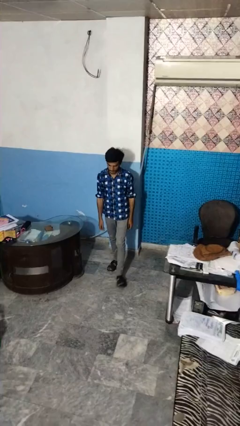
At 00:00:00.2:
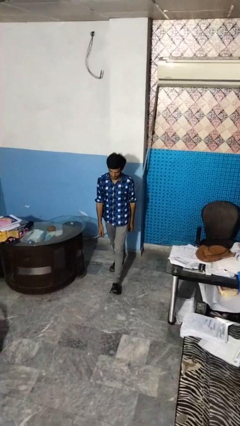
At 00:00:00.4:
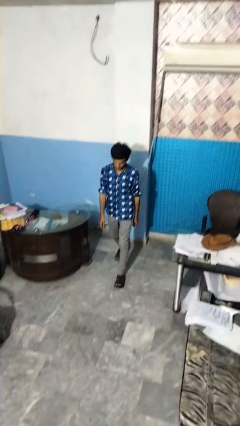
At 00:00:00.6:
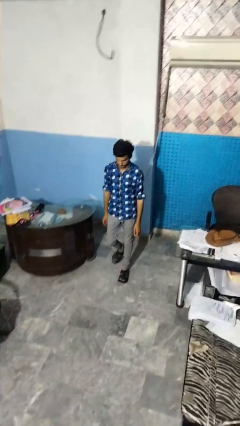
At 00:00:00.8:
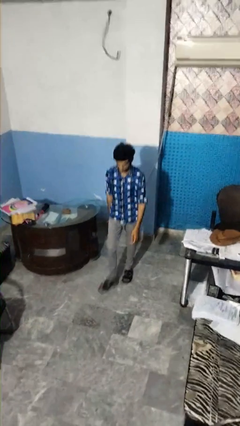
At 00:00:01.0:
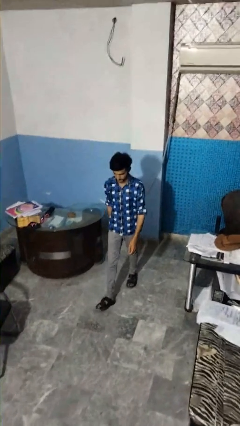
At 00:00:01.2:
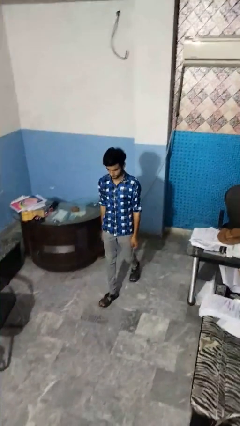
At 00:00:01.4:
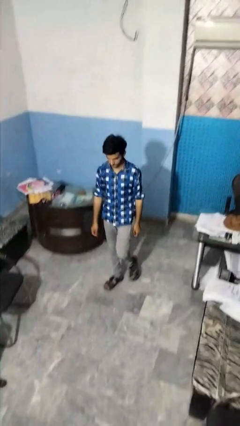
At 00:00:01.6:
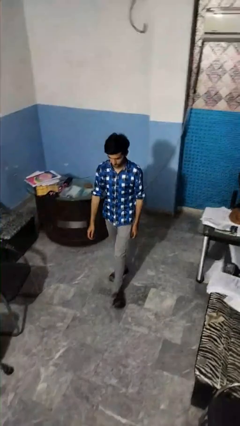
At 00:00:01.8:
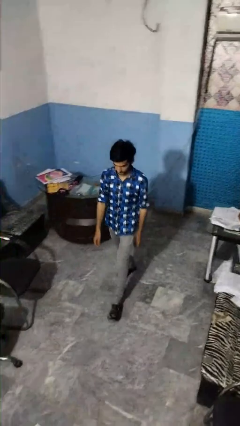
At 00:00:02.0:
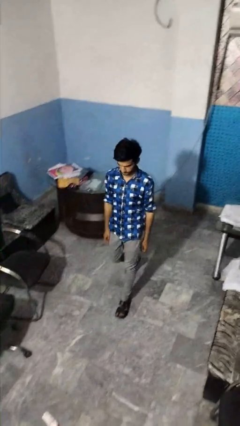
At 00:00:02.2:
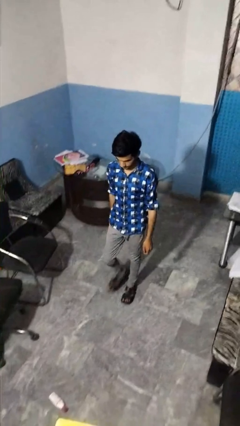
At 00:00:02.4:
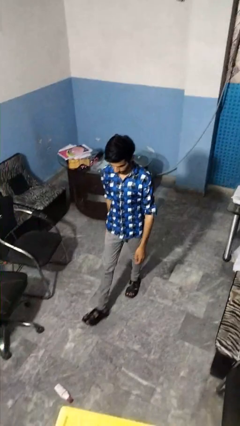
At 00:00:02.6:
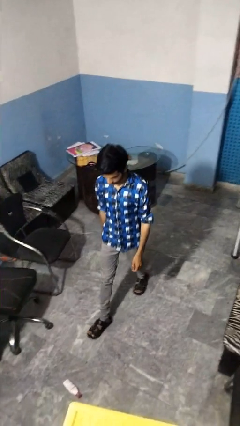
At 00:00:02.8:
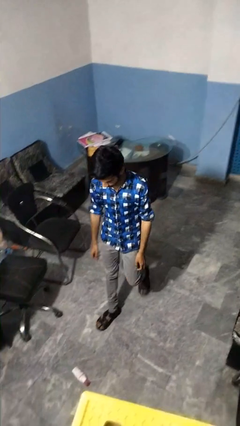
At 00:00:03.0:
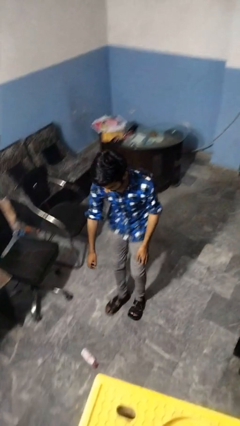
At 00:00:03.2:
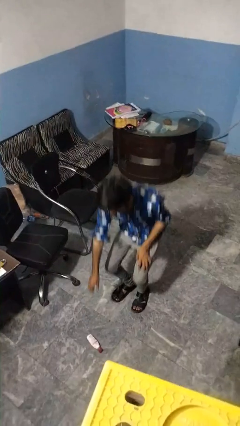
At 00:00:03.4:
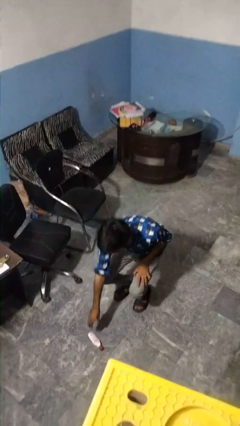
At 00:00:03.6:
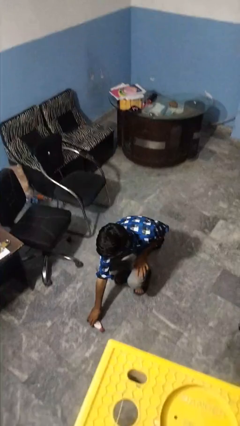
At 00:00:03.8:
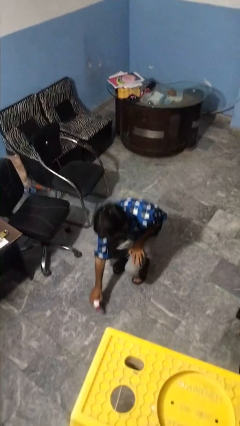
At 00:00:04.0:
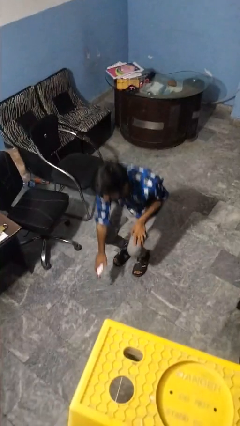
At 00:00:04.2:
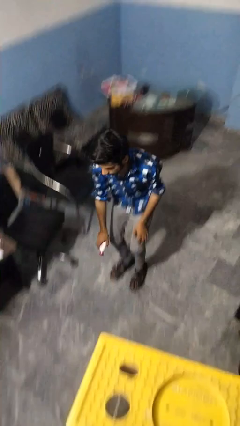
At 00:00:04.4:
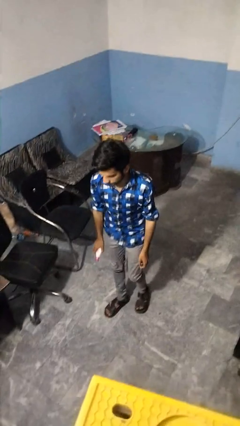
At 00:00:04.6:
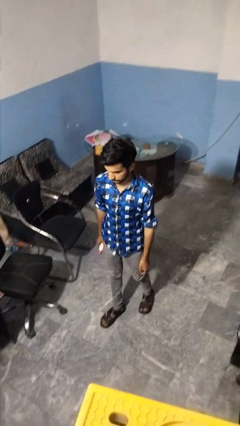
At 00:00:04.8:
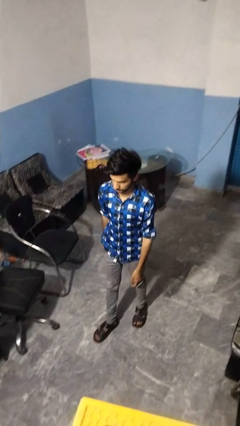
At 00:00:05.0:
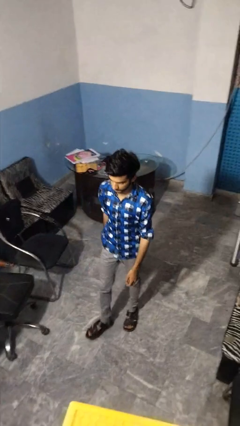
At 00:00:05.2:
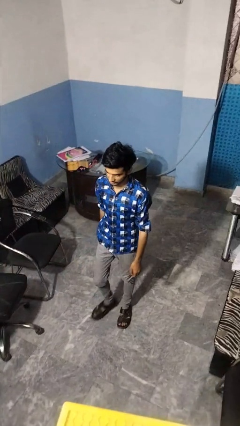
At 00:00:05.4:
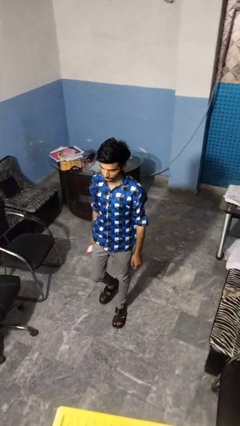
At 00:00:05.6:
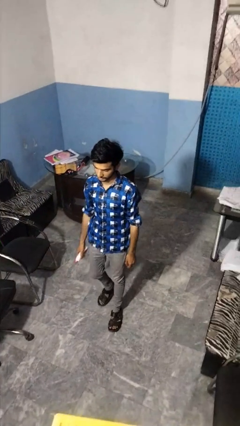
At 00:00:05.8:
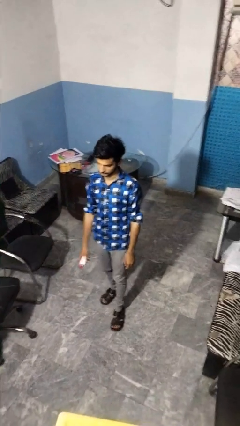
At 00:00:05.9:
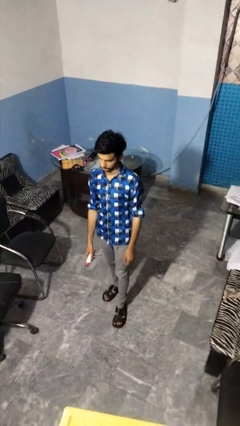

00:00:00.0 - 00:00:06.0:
person picks up object from floor

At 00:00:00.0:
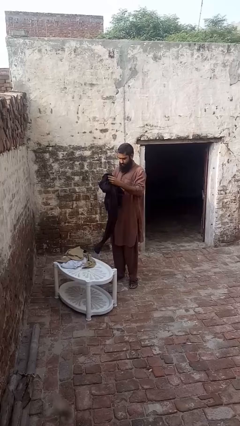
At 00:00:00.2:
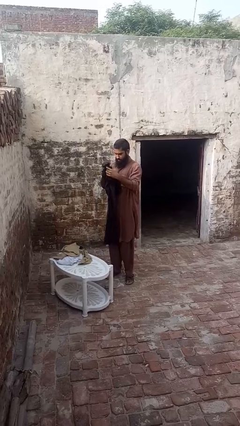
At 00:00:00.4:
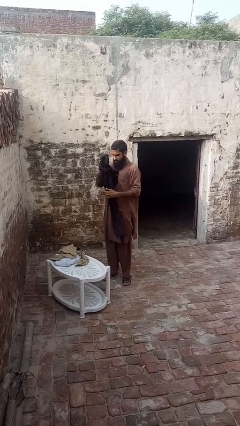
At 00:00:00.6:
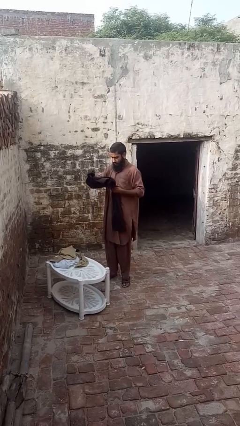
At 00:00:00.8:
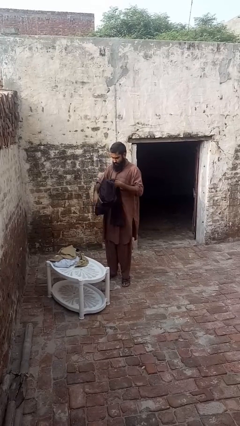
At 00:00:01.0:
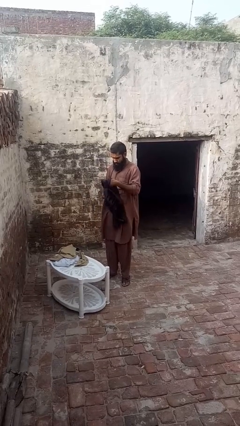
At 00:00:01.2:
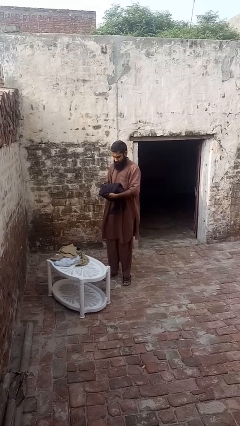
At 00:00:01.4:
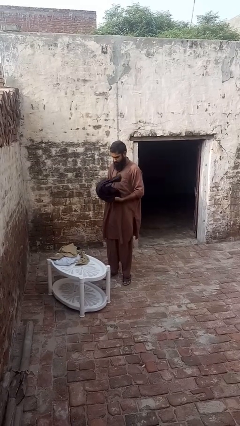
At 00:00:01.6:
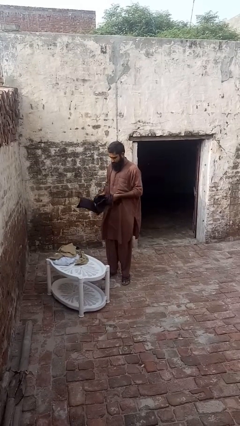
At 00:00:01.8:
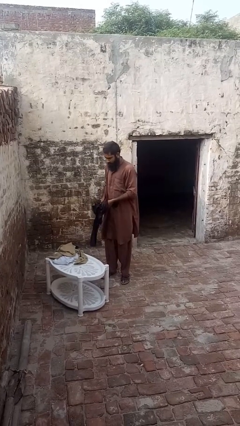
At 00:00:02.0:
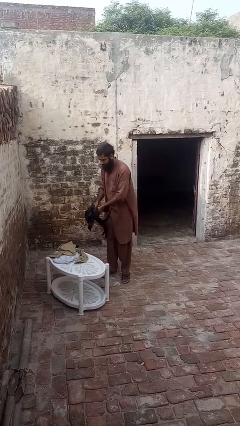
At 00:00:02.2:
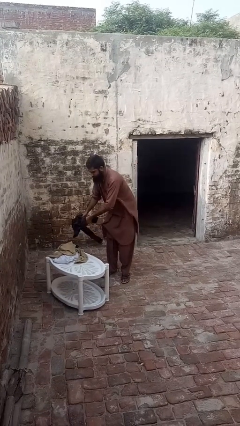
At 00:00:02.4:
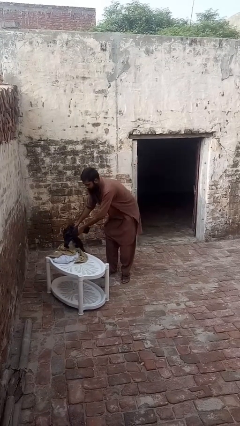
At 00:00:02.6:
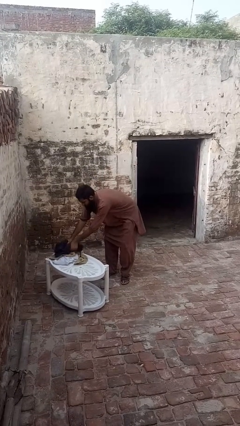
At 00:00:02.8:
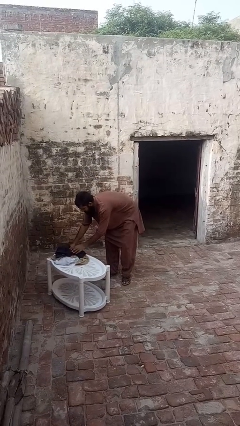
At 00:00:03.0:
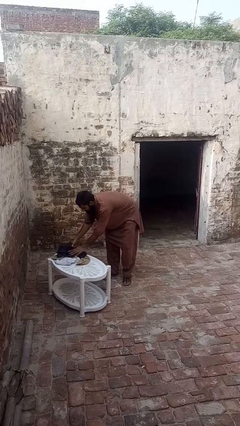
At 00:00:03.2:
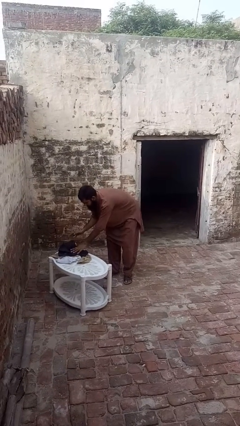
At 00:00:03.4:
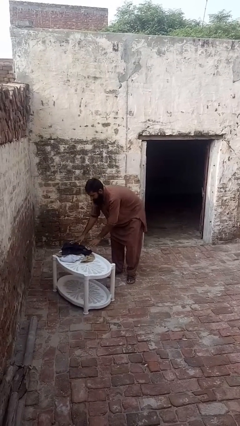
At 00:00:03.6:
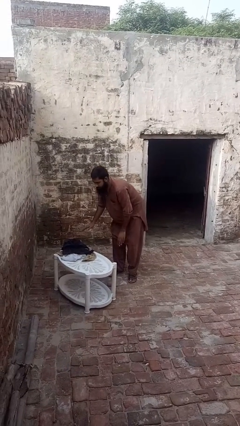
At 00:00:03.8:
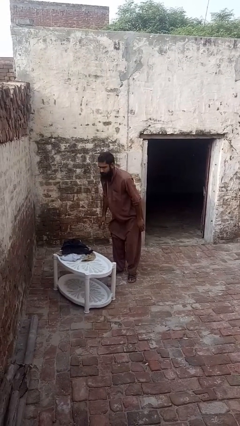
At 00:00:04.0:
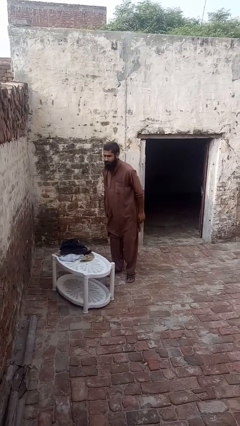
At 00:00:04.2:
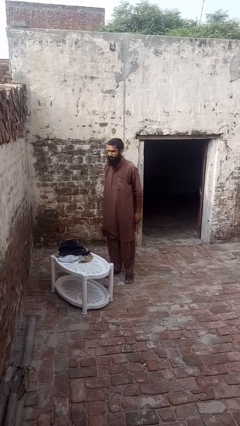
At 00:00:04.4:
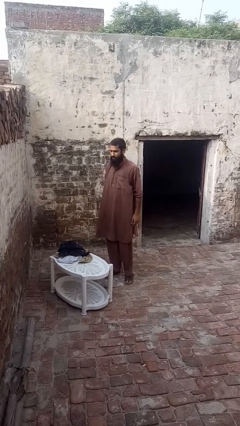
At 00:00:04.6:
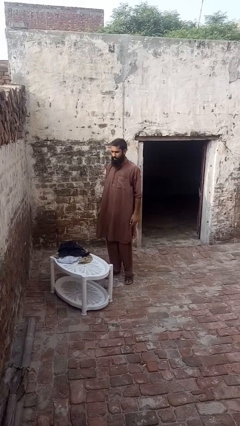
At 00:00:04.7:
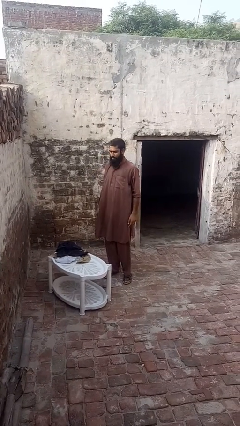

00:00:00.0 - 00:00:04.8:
person folds pants

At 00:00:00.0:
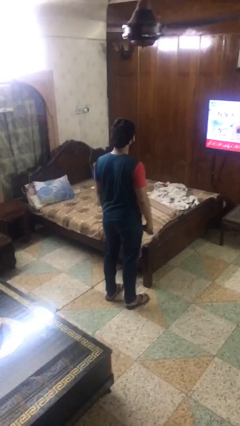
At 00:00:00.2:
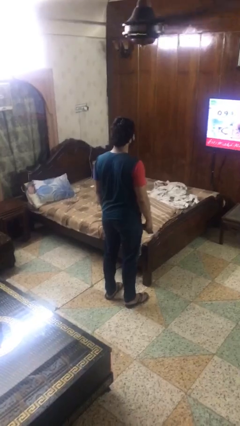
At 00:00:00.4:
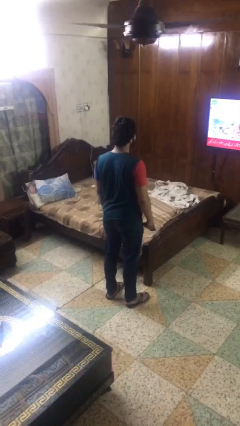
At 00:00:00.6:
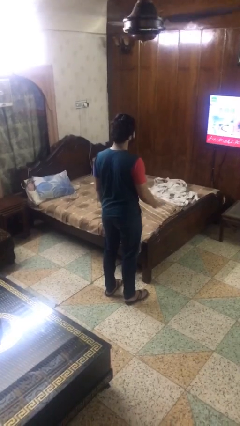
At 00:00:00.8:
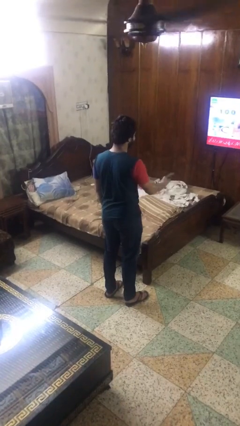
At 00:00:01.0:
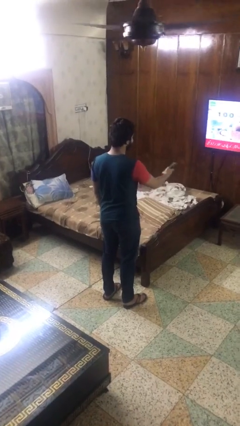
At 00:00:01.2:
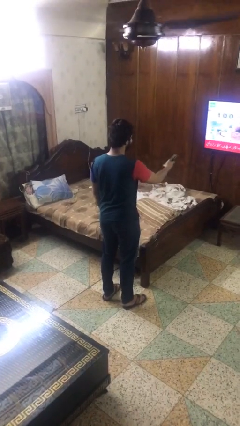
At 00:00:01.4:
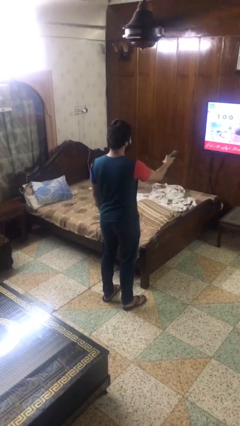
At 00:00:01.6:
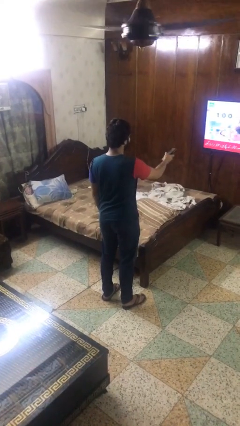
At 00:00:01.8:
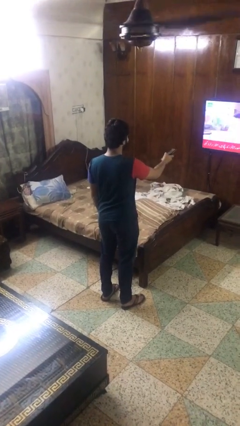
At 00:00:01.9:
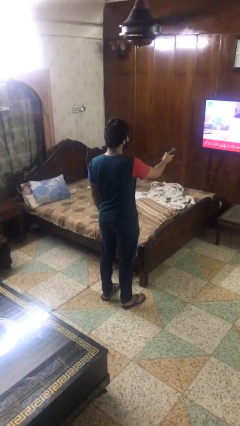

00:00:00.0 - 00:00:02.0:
person uses television remote

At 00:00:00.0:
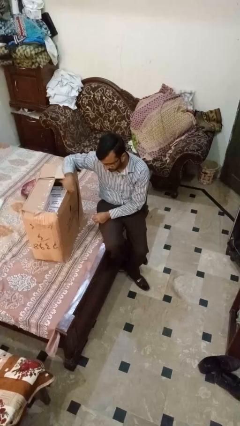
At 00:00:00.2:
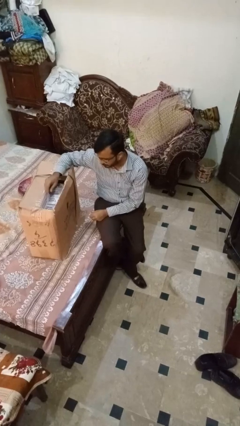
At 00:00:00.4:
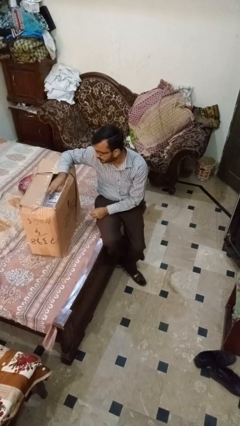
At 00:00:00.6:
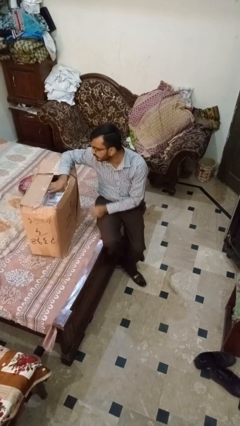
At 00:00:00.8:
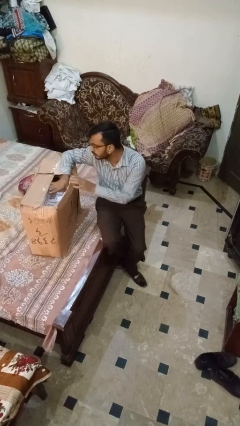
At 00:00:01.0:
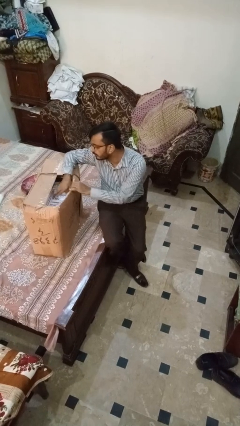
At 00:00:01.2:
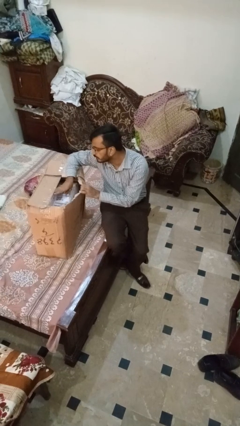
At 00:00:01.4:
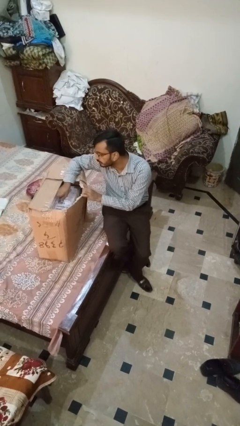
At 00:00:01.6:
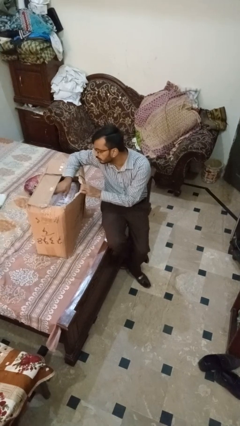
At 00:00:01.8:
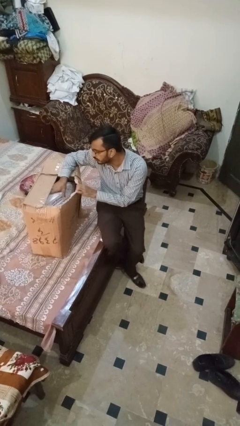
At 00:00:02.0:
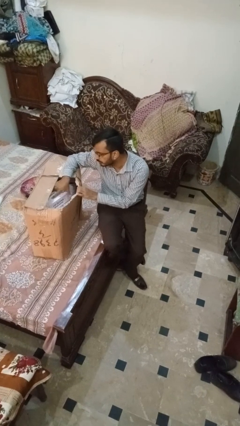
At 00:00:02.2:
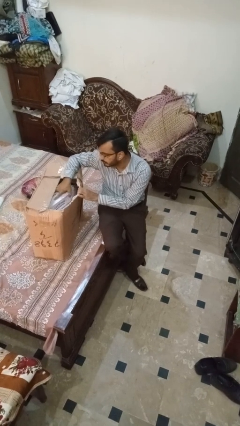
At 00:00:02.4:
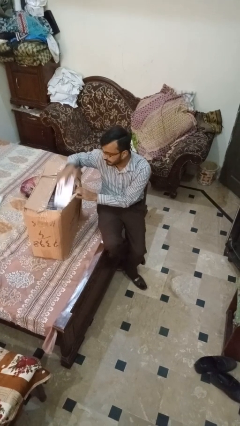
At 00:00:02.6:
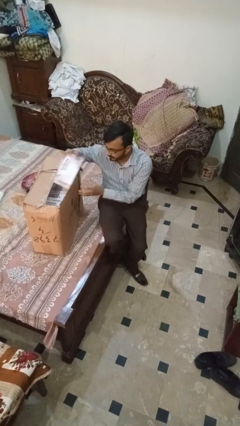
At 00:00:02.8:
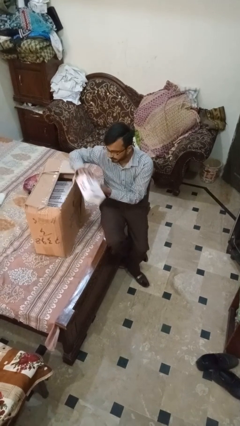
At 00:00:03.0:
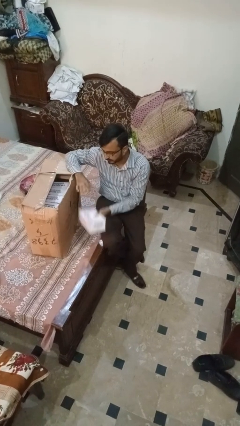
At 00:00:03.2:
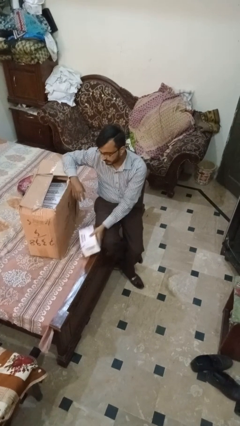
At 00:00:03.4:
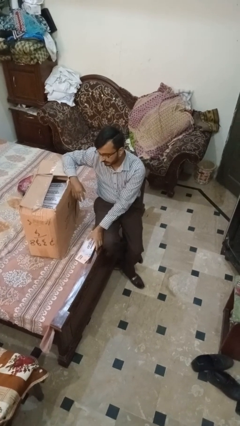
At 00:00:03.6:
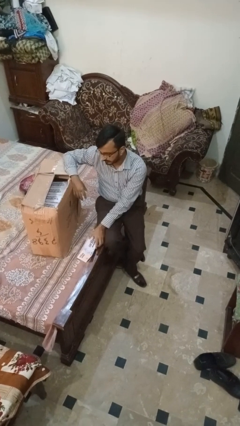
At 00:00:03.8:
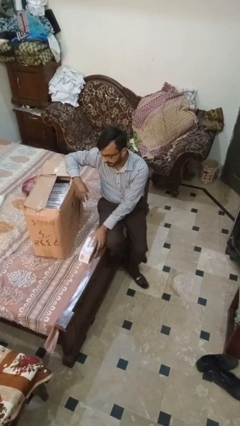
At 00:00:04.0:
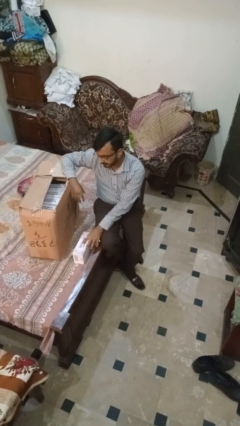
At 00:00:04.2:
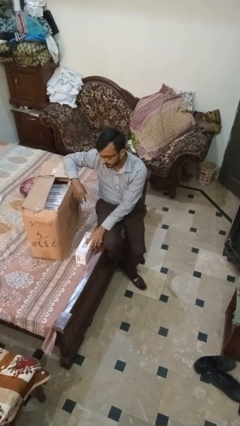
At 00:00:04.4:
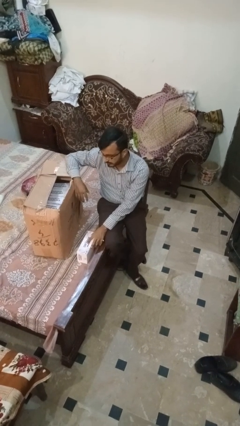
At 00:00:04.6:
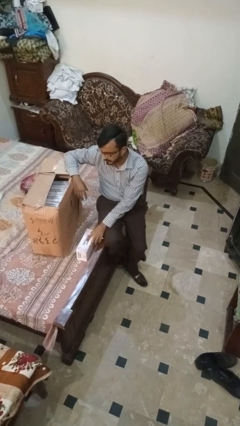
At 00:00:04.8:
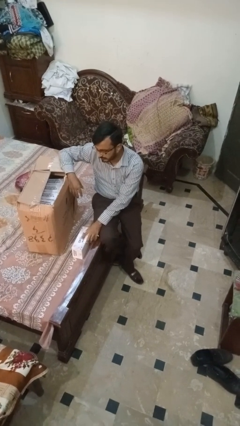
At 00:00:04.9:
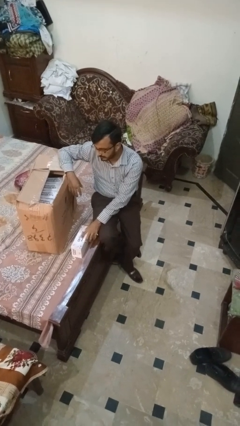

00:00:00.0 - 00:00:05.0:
person takes object from box
